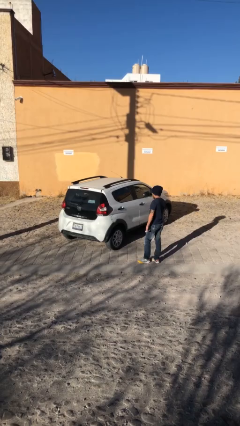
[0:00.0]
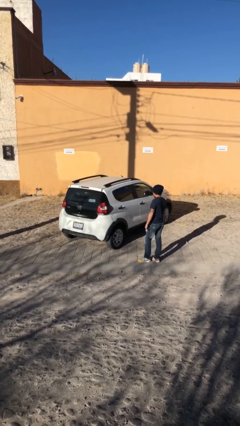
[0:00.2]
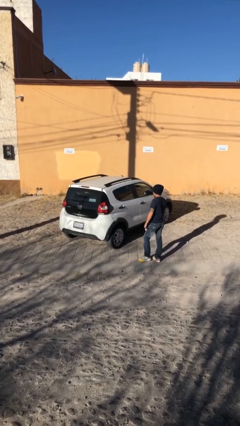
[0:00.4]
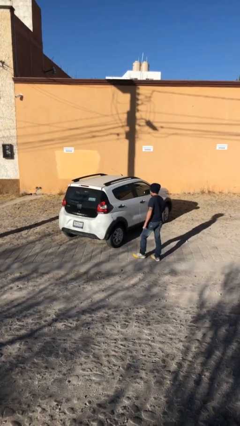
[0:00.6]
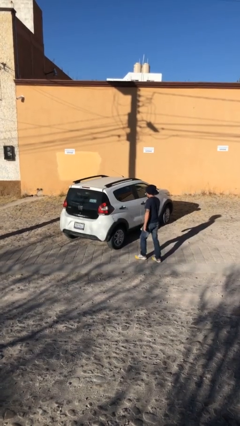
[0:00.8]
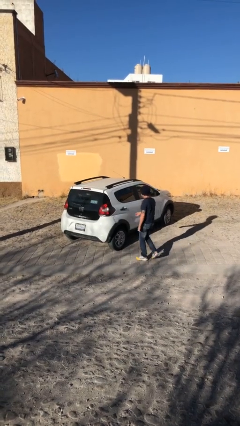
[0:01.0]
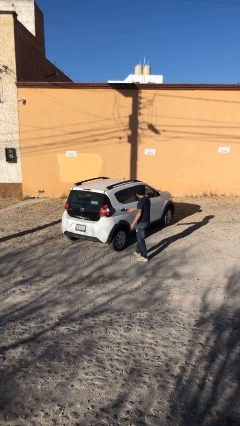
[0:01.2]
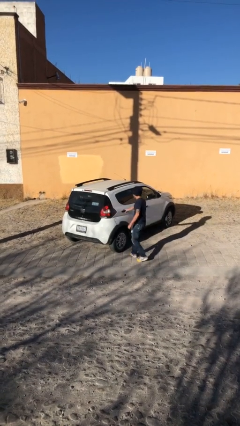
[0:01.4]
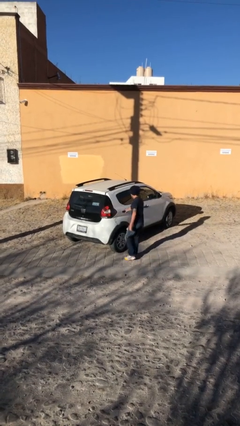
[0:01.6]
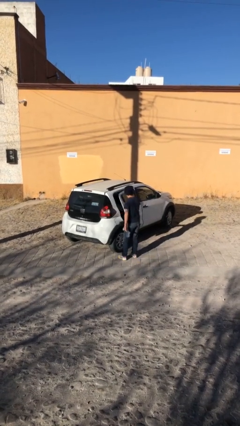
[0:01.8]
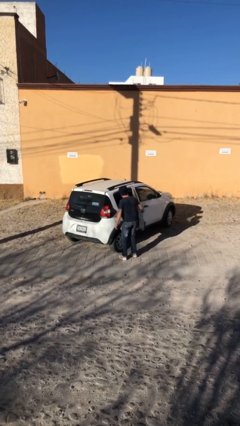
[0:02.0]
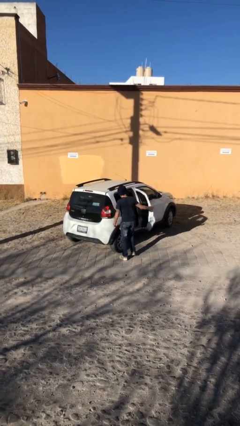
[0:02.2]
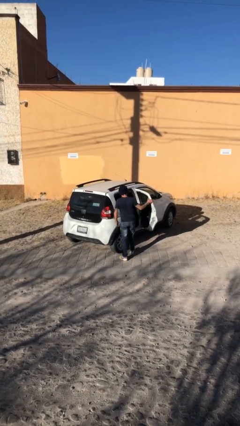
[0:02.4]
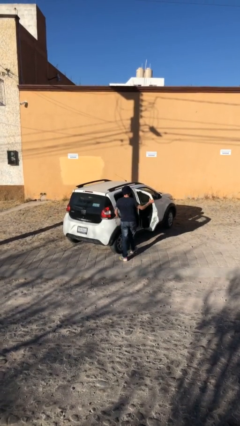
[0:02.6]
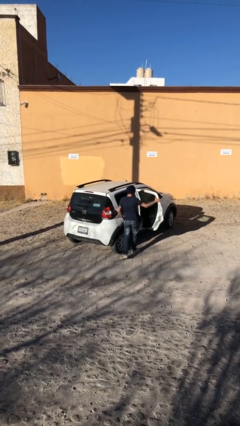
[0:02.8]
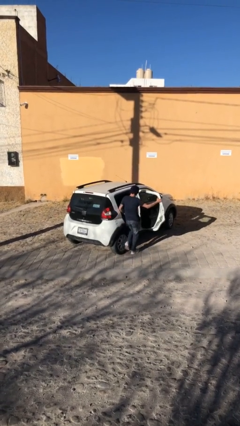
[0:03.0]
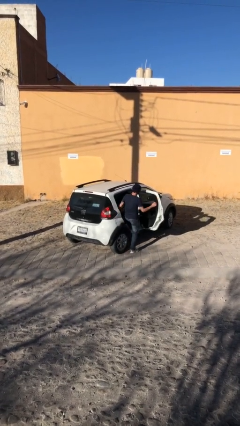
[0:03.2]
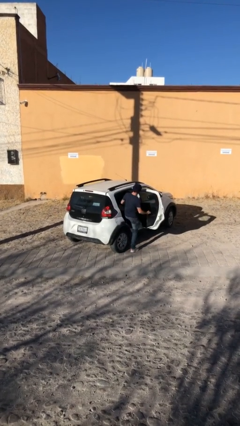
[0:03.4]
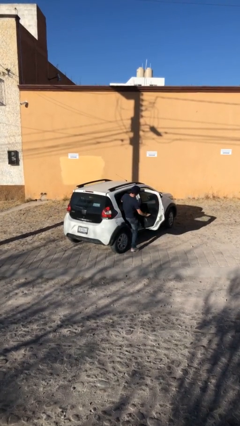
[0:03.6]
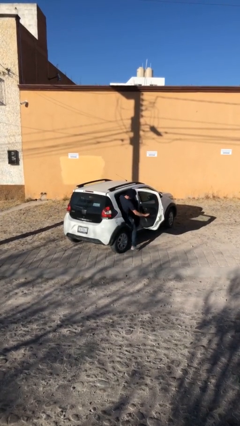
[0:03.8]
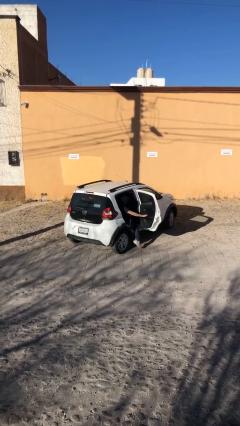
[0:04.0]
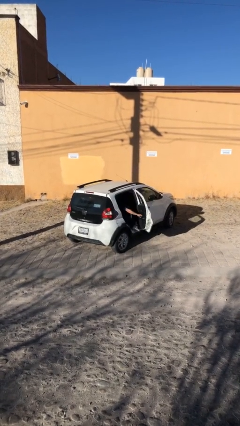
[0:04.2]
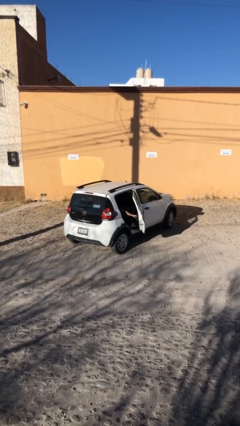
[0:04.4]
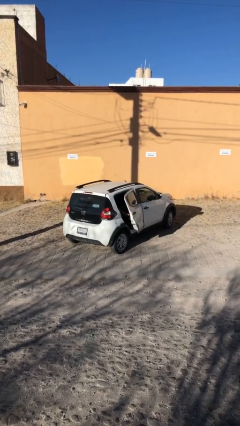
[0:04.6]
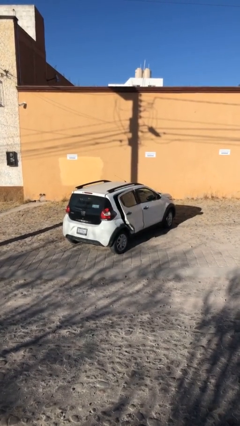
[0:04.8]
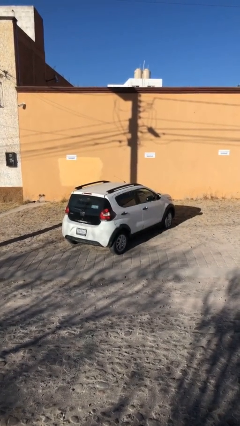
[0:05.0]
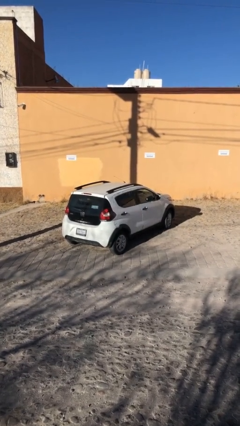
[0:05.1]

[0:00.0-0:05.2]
car picks up person

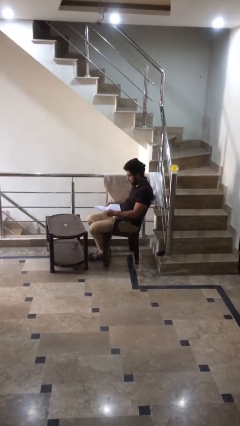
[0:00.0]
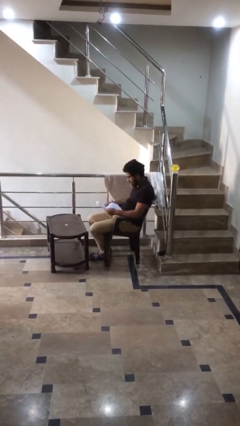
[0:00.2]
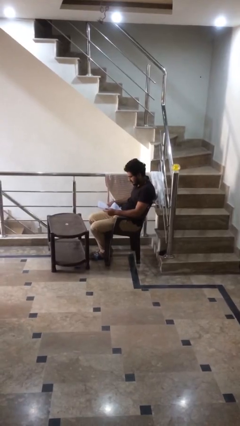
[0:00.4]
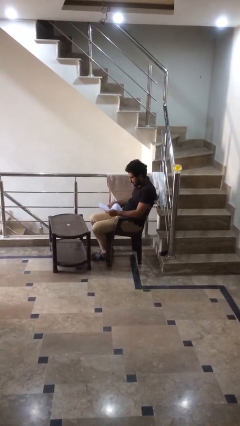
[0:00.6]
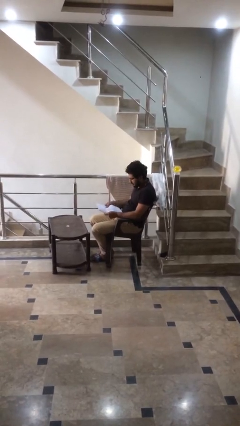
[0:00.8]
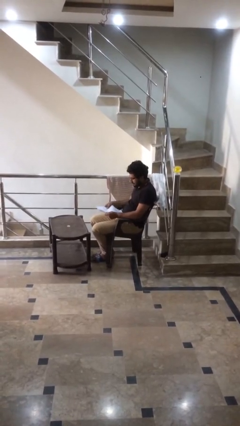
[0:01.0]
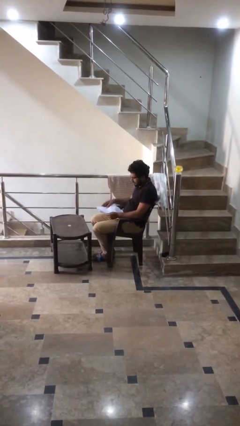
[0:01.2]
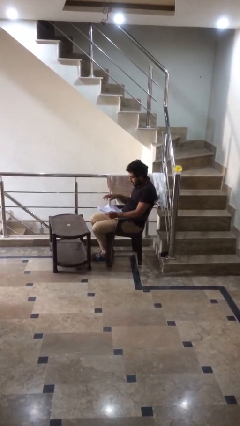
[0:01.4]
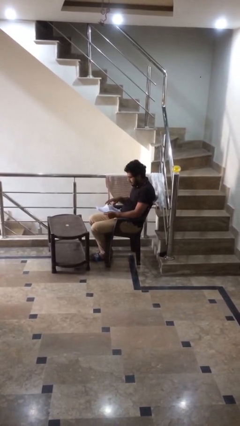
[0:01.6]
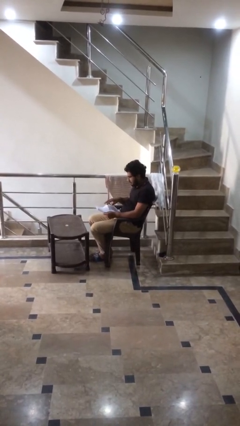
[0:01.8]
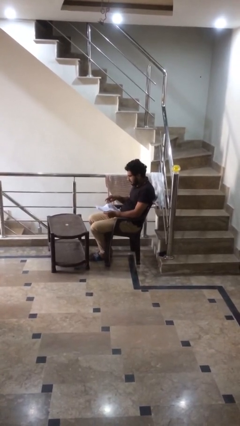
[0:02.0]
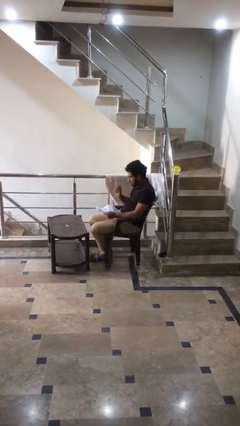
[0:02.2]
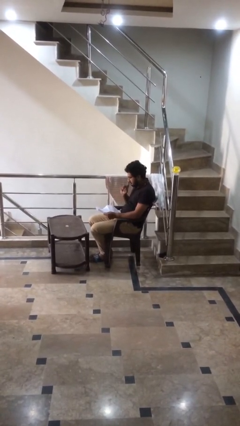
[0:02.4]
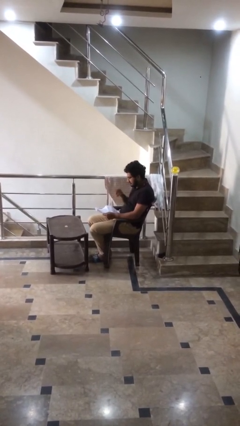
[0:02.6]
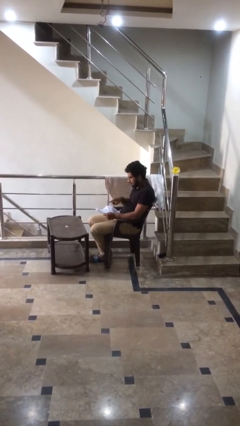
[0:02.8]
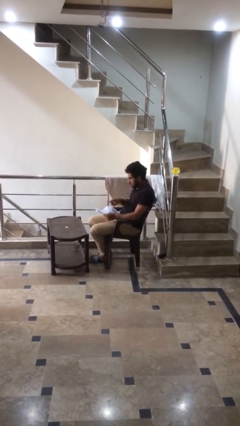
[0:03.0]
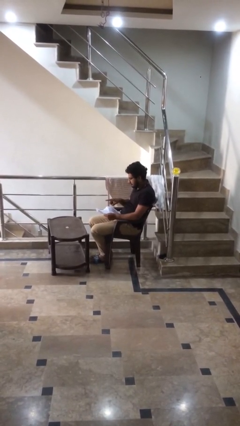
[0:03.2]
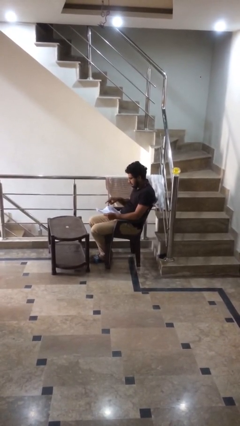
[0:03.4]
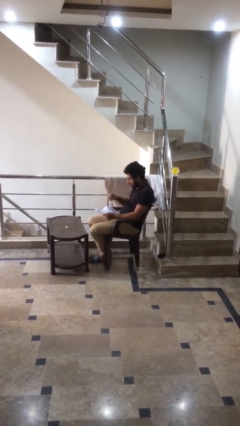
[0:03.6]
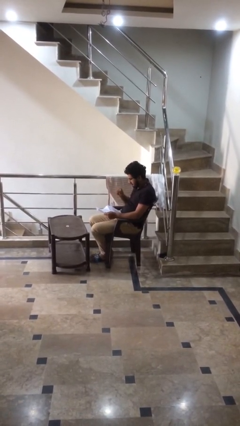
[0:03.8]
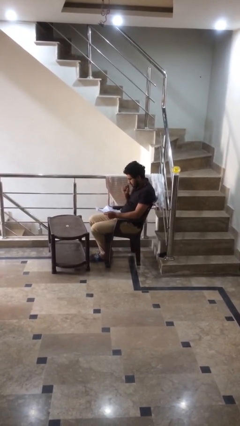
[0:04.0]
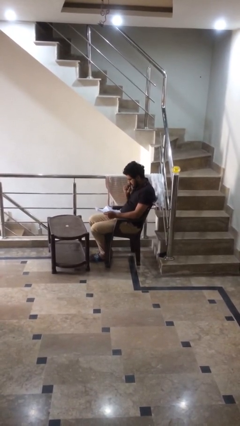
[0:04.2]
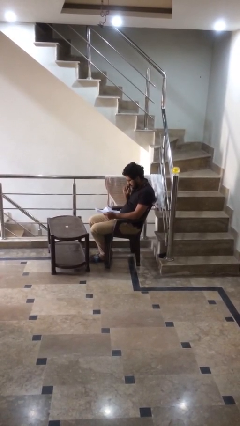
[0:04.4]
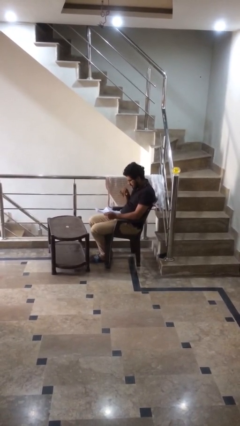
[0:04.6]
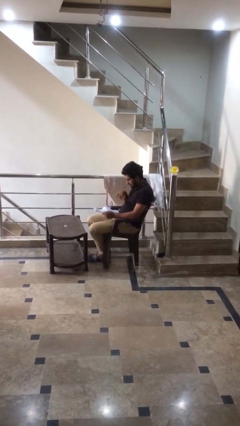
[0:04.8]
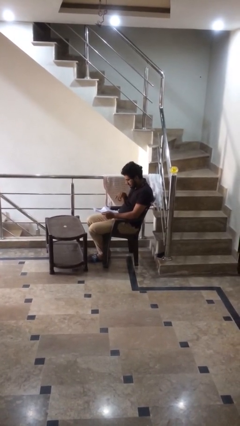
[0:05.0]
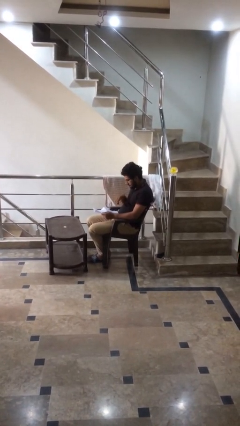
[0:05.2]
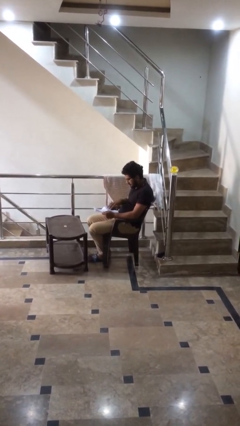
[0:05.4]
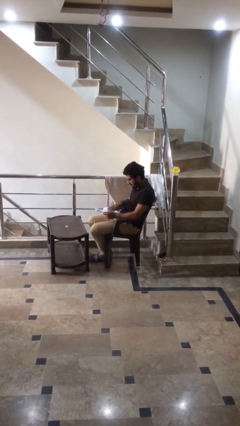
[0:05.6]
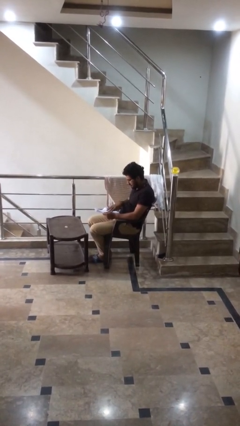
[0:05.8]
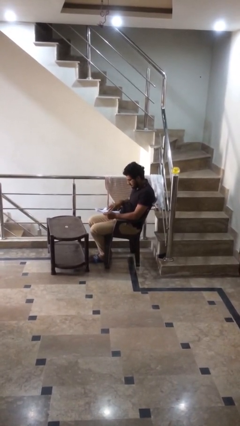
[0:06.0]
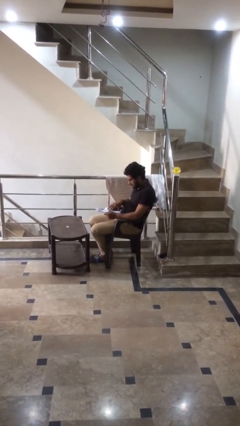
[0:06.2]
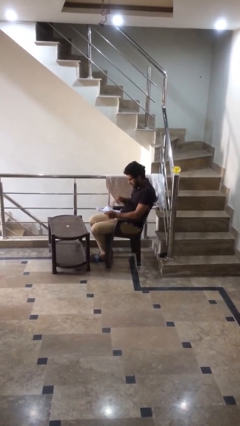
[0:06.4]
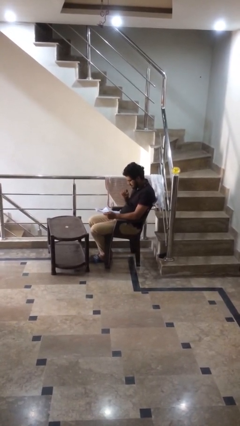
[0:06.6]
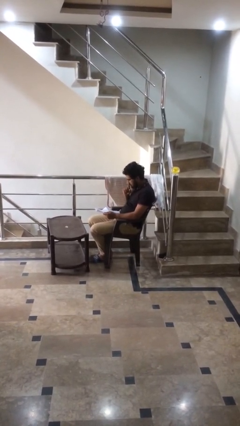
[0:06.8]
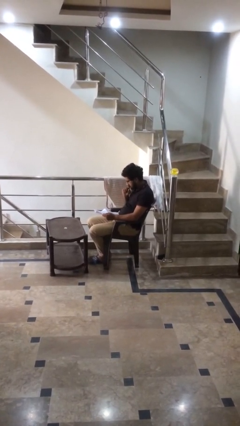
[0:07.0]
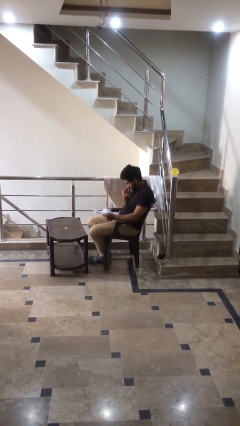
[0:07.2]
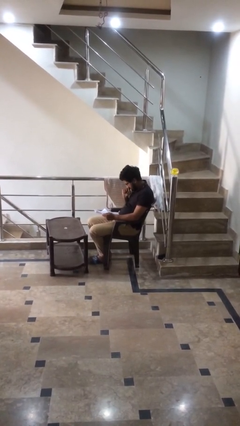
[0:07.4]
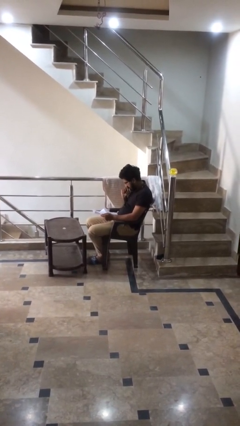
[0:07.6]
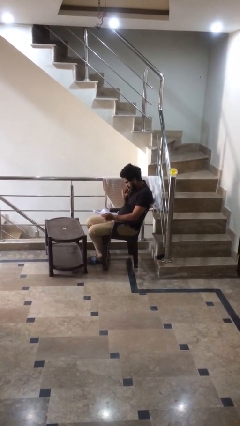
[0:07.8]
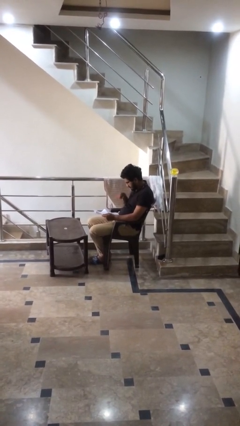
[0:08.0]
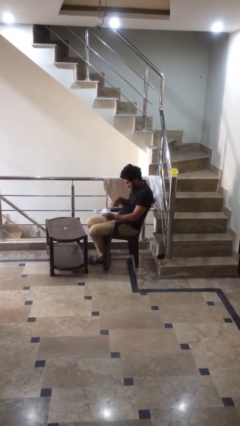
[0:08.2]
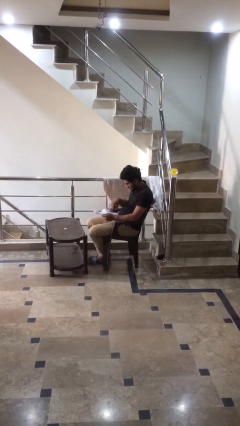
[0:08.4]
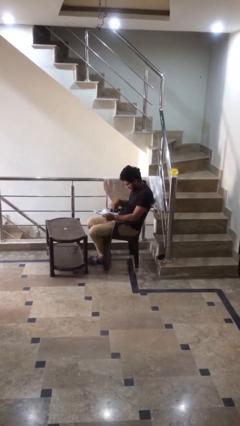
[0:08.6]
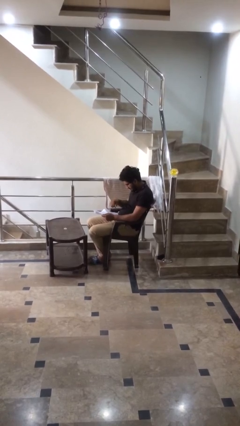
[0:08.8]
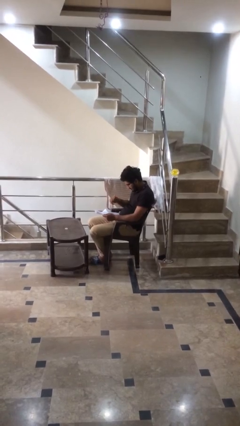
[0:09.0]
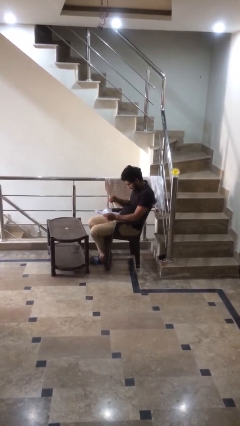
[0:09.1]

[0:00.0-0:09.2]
person reads document

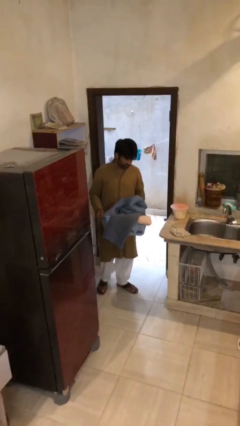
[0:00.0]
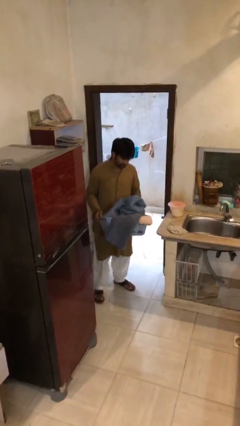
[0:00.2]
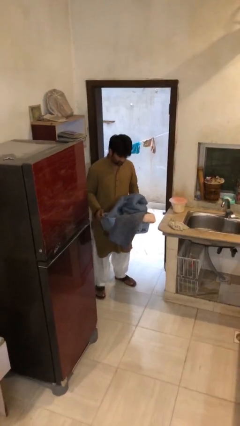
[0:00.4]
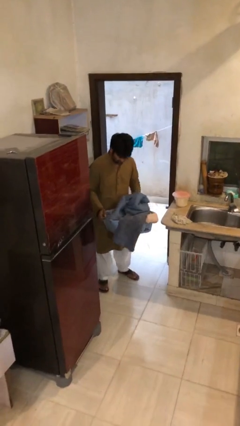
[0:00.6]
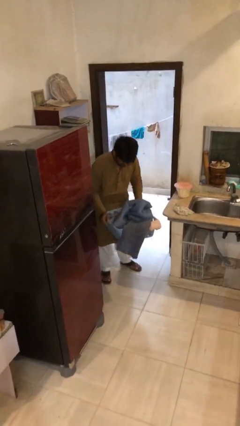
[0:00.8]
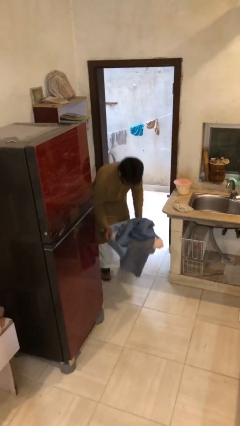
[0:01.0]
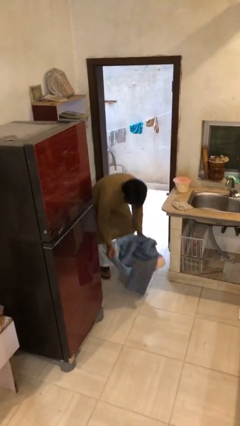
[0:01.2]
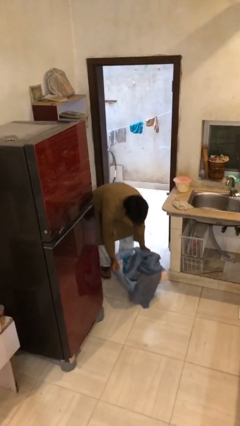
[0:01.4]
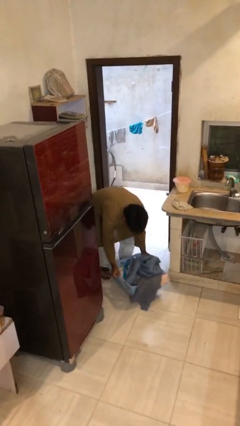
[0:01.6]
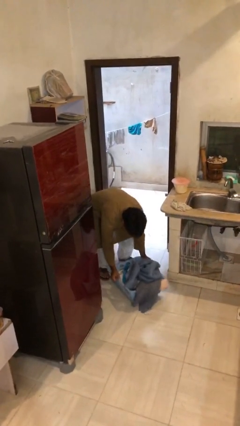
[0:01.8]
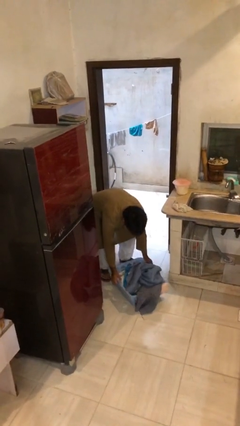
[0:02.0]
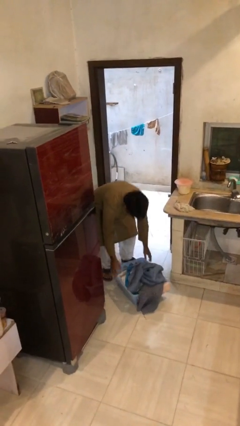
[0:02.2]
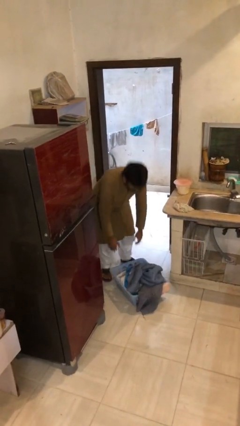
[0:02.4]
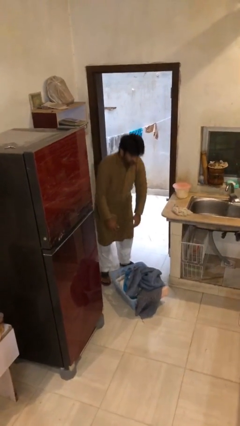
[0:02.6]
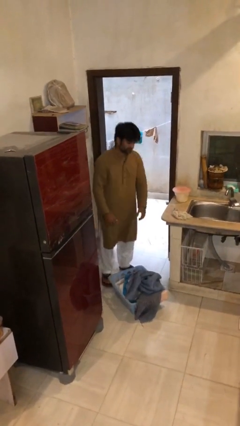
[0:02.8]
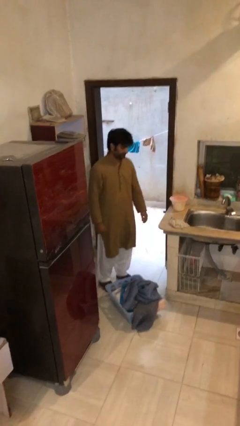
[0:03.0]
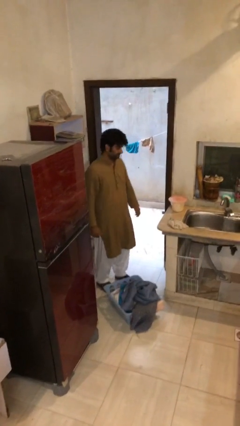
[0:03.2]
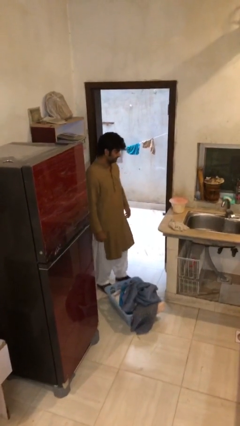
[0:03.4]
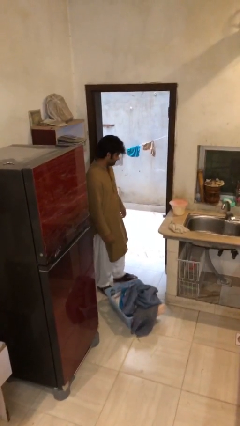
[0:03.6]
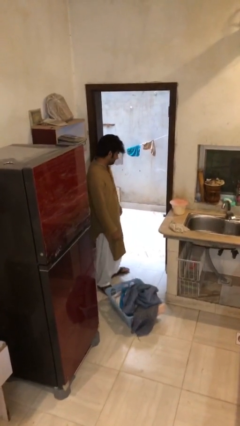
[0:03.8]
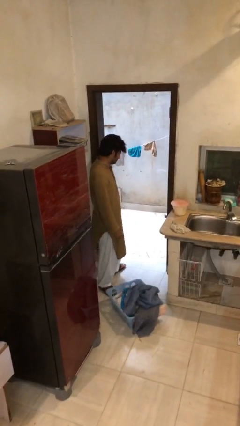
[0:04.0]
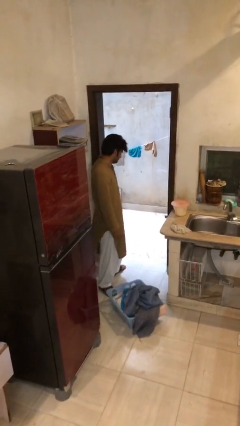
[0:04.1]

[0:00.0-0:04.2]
person puts down object on floor
